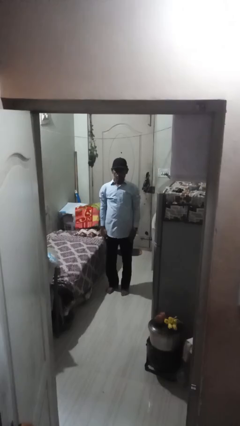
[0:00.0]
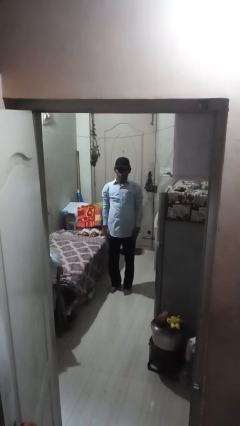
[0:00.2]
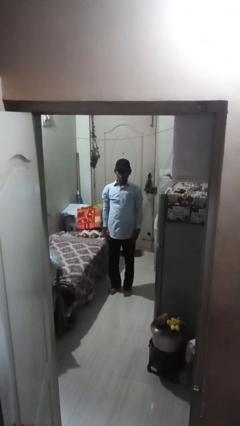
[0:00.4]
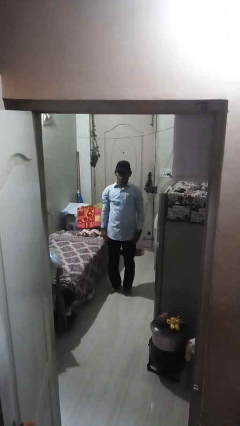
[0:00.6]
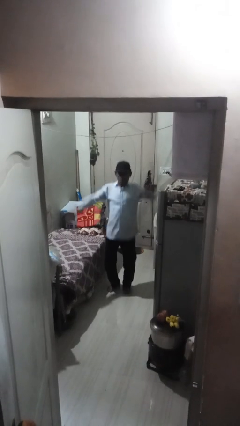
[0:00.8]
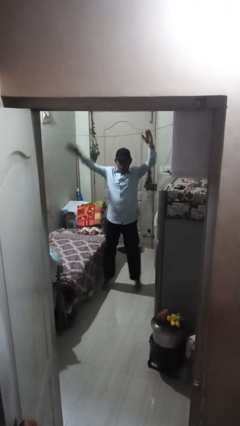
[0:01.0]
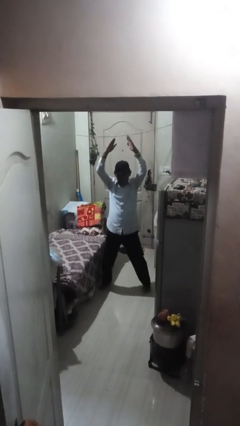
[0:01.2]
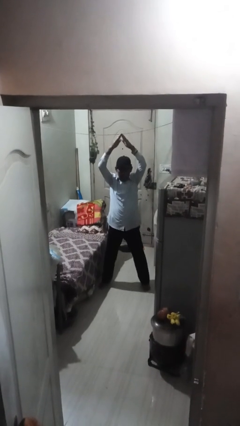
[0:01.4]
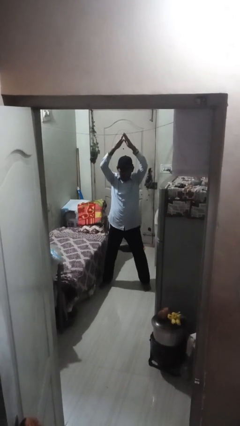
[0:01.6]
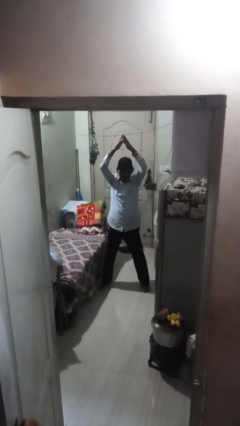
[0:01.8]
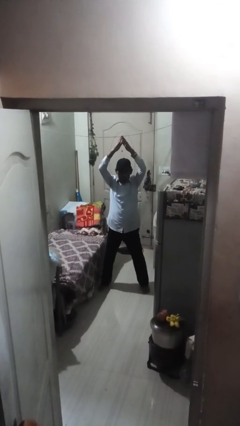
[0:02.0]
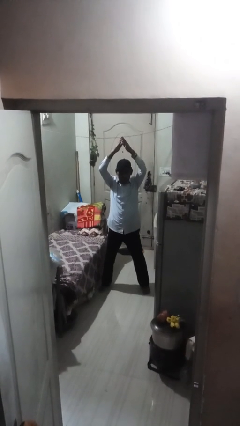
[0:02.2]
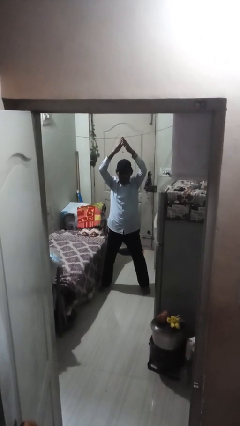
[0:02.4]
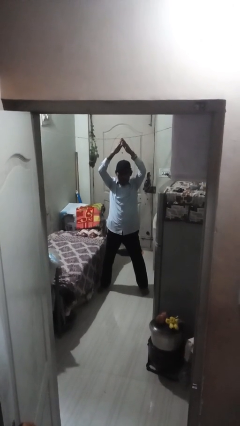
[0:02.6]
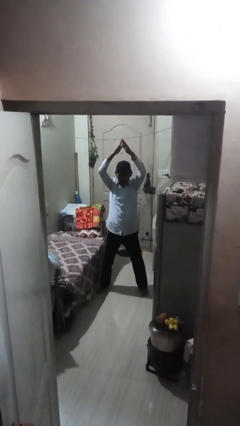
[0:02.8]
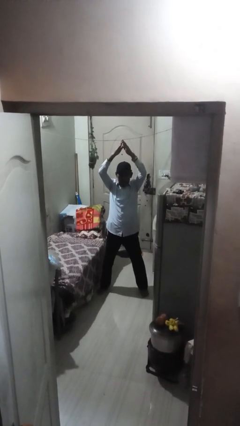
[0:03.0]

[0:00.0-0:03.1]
person exercises with jumping jacks

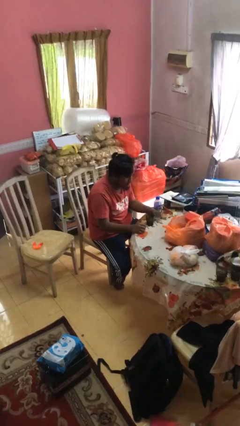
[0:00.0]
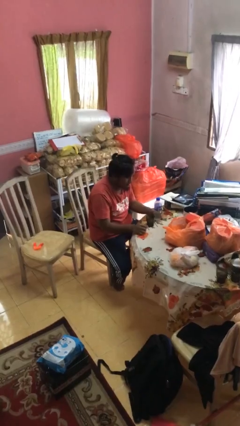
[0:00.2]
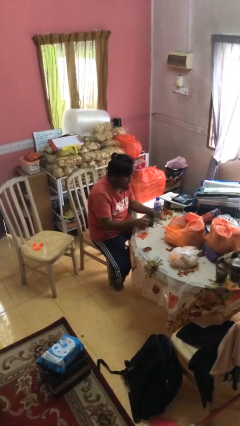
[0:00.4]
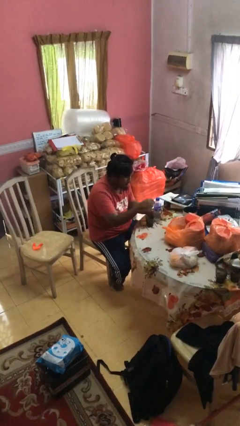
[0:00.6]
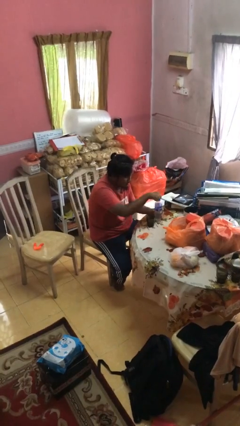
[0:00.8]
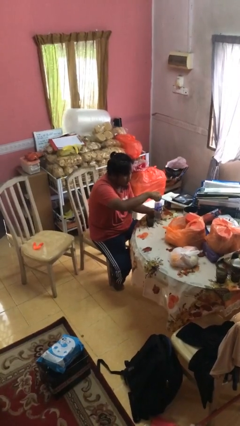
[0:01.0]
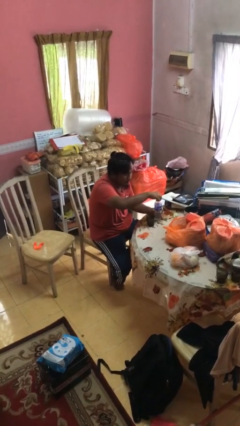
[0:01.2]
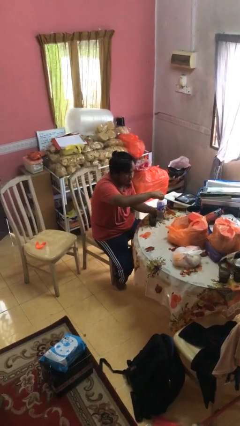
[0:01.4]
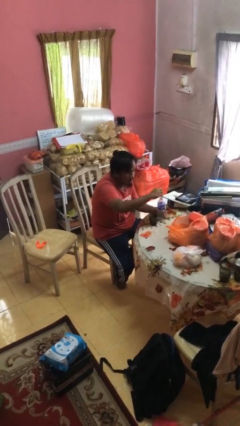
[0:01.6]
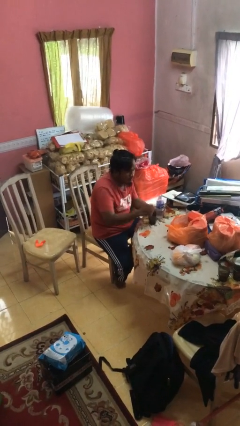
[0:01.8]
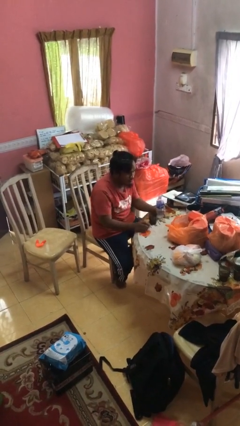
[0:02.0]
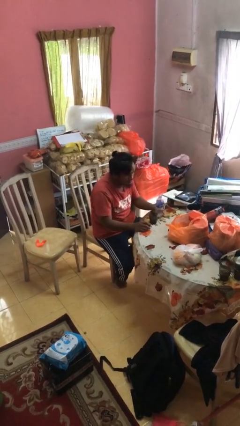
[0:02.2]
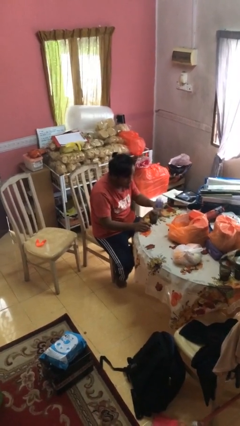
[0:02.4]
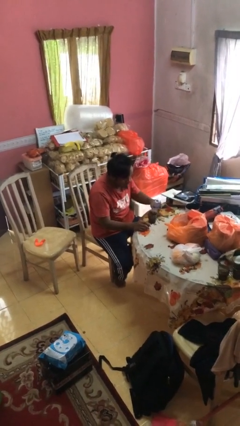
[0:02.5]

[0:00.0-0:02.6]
person unscrews lid from bottle

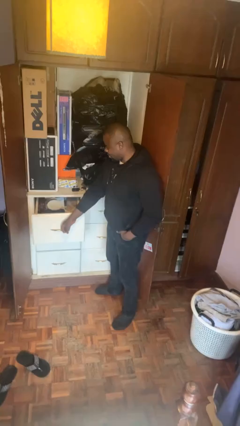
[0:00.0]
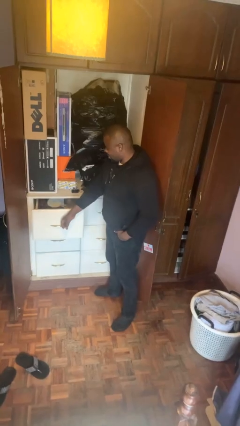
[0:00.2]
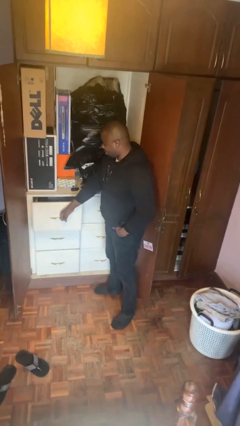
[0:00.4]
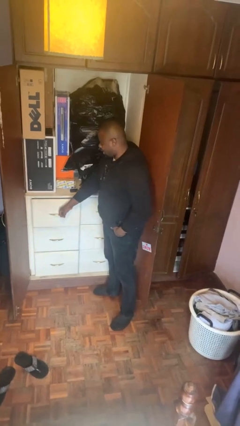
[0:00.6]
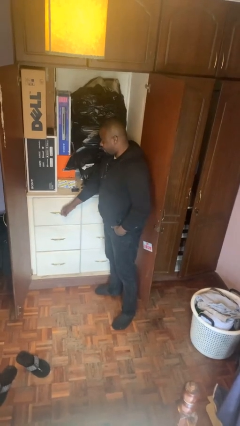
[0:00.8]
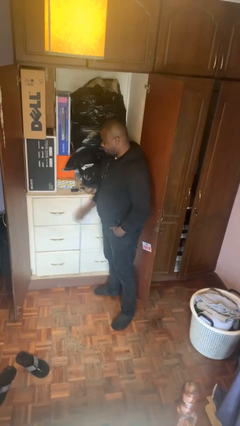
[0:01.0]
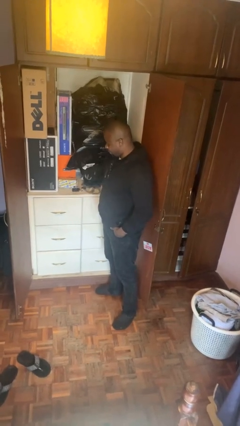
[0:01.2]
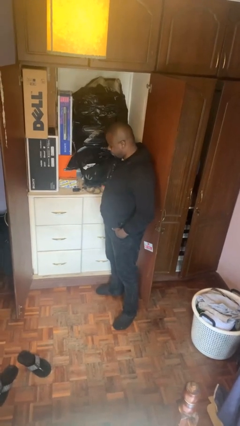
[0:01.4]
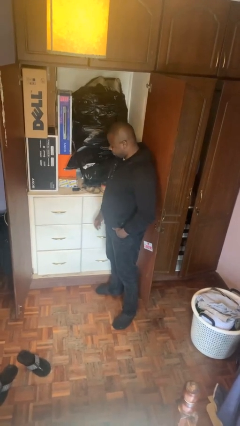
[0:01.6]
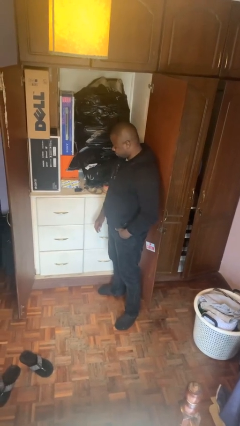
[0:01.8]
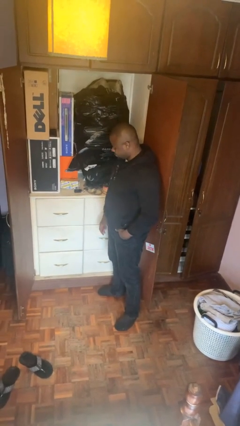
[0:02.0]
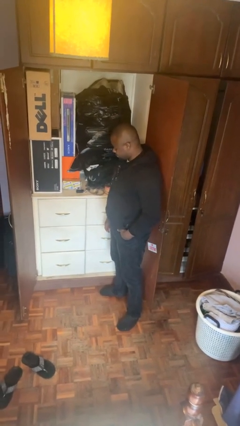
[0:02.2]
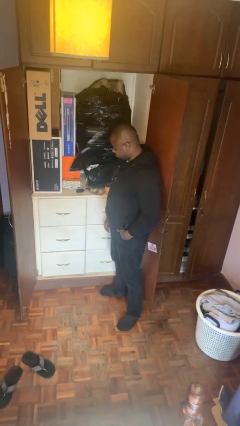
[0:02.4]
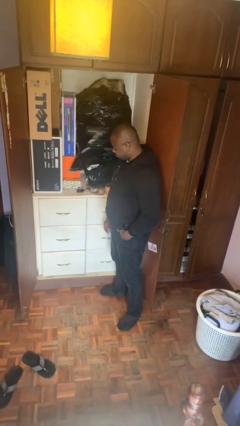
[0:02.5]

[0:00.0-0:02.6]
person closes dresser drawer

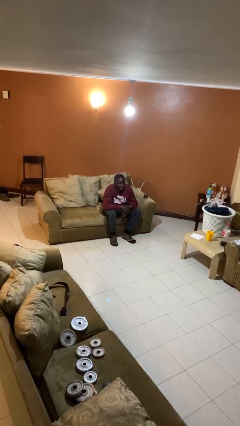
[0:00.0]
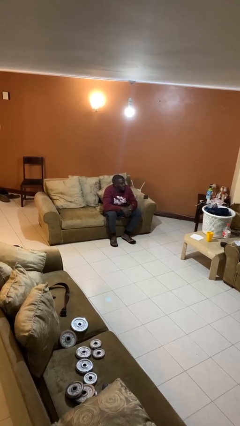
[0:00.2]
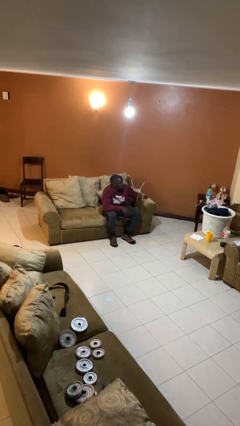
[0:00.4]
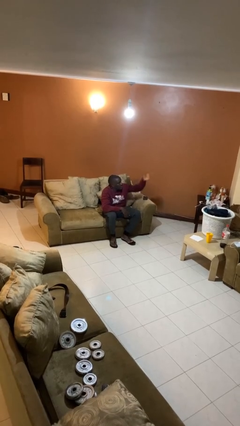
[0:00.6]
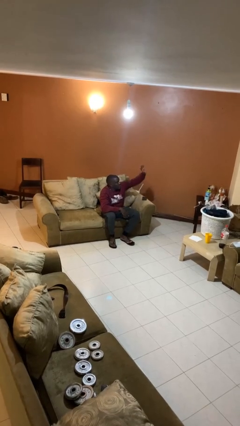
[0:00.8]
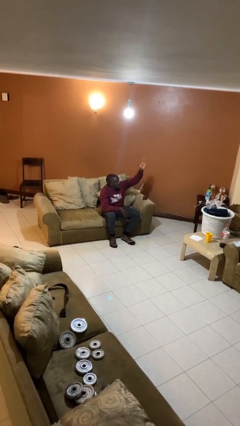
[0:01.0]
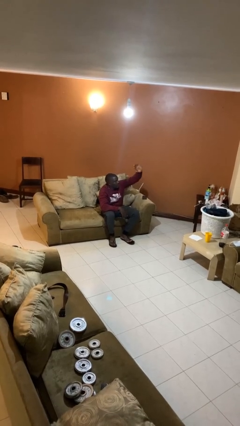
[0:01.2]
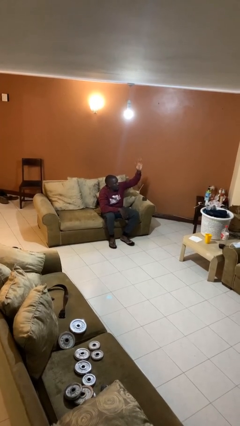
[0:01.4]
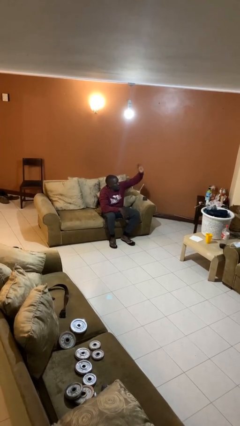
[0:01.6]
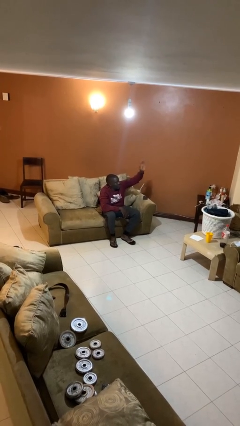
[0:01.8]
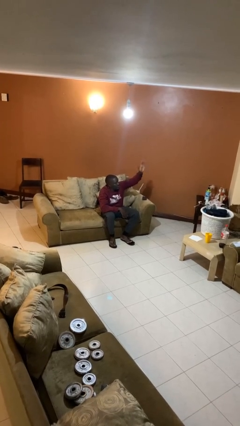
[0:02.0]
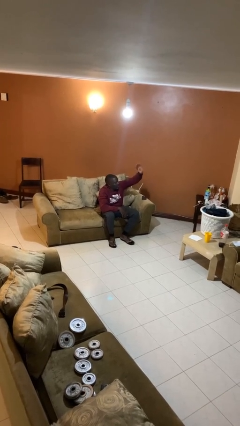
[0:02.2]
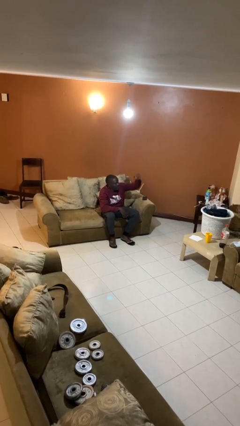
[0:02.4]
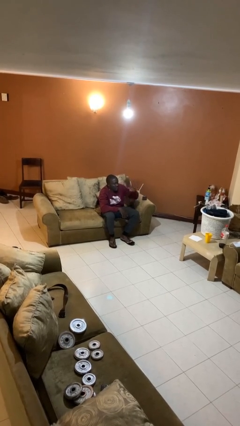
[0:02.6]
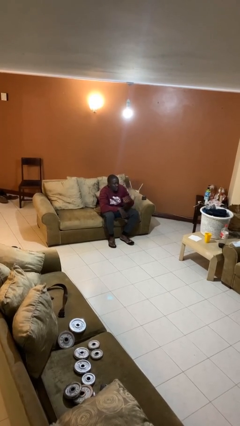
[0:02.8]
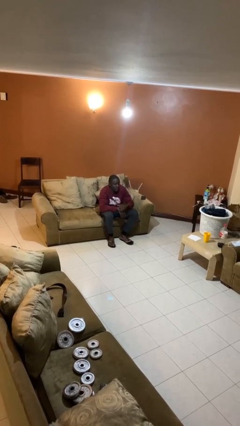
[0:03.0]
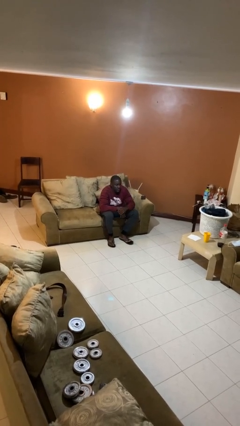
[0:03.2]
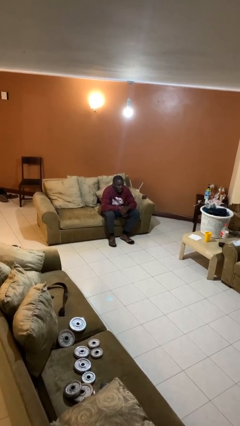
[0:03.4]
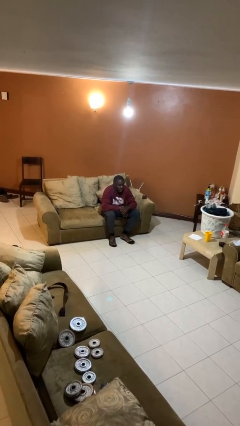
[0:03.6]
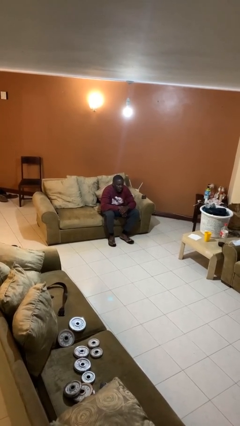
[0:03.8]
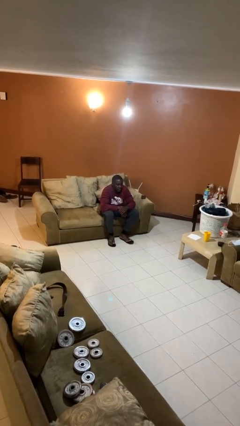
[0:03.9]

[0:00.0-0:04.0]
person waves at person

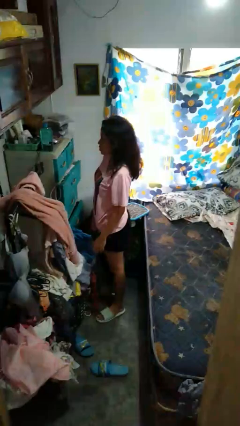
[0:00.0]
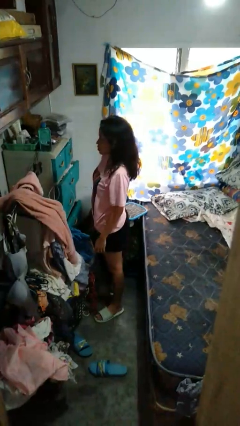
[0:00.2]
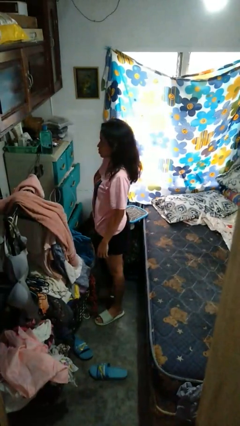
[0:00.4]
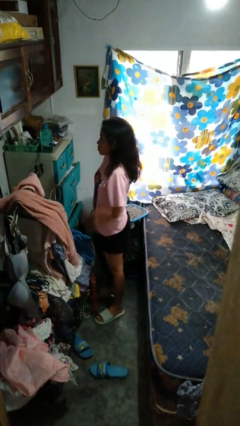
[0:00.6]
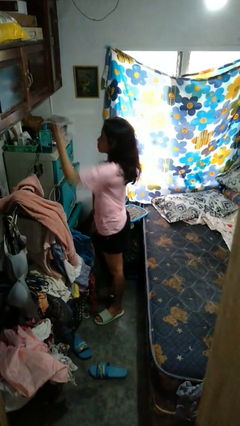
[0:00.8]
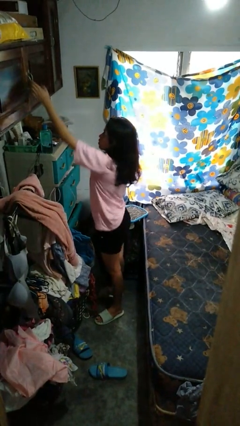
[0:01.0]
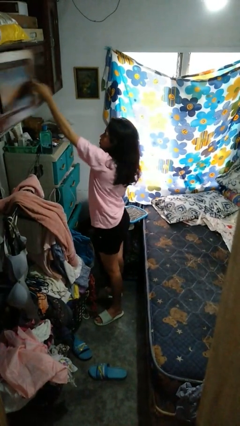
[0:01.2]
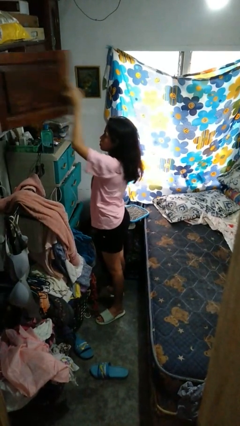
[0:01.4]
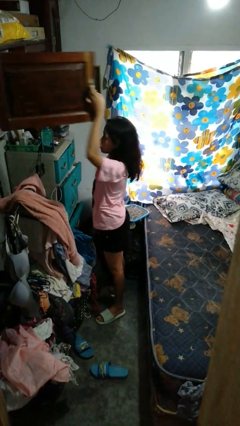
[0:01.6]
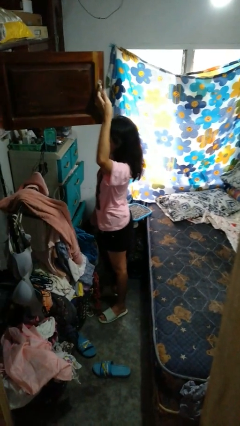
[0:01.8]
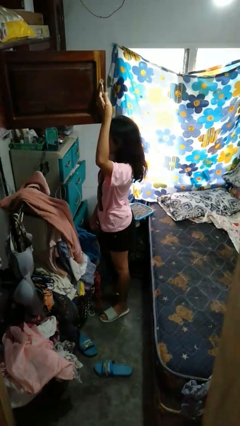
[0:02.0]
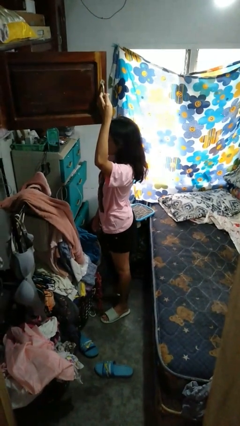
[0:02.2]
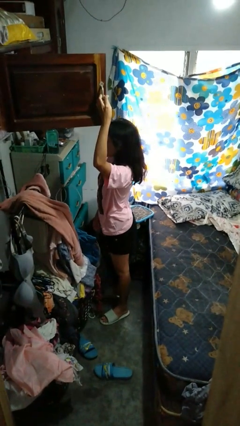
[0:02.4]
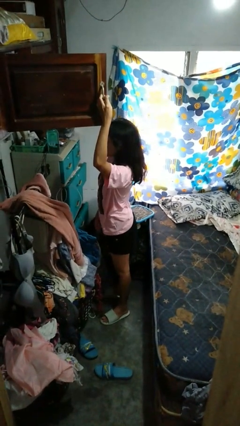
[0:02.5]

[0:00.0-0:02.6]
person opens closet door

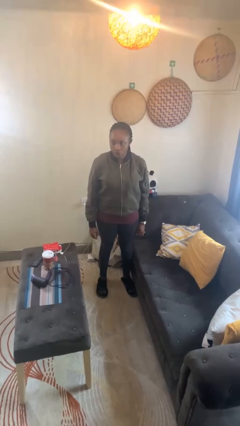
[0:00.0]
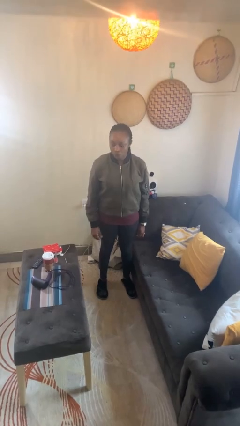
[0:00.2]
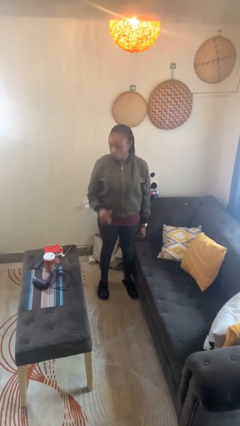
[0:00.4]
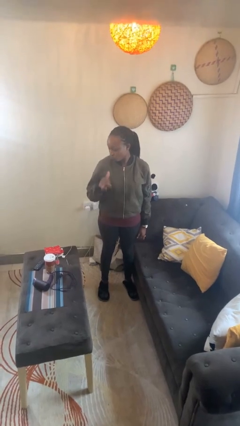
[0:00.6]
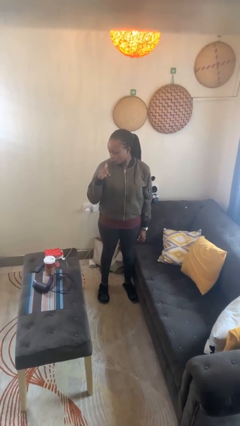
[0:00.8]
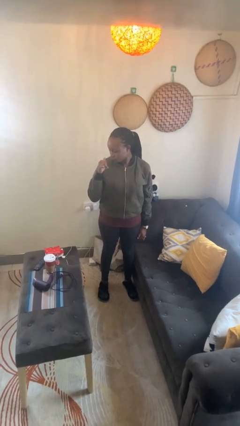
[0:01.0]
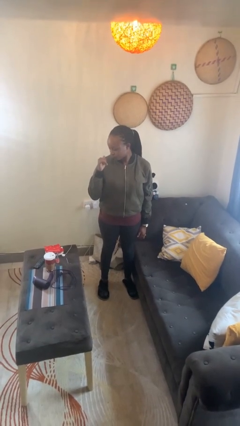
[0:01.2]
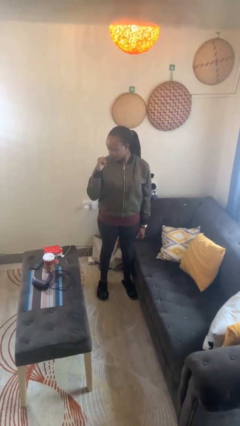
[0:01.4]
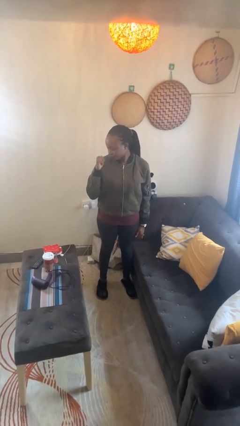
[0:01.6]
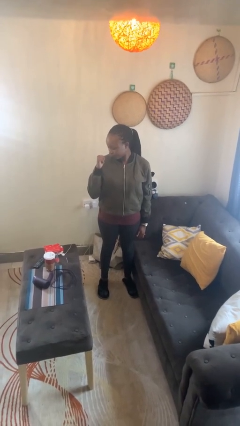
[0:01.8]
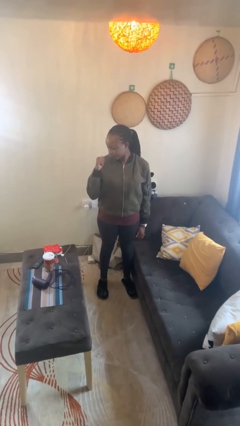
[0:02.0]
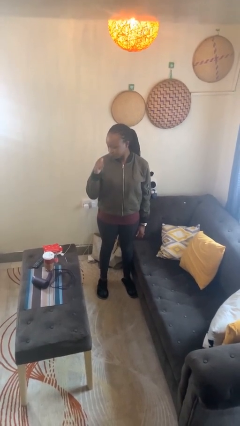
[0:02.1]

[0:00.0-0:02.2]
person gestures behind me

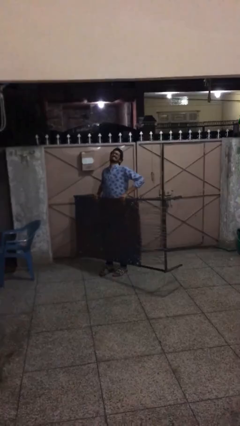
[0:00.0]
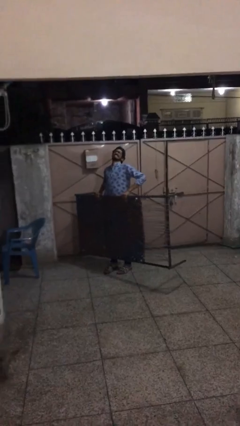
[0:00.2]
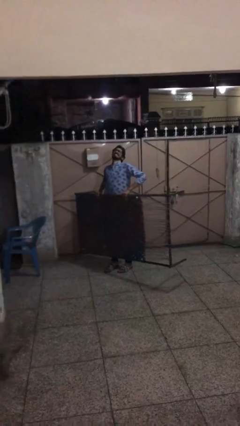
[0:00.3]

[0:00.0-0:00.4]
person carries heavy object
